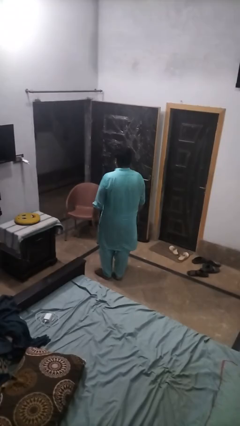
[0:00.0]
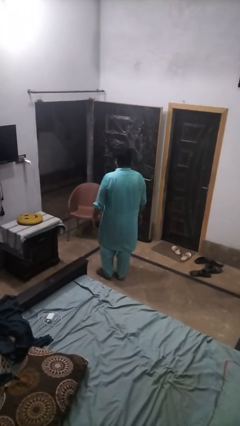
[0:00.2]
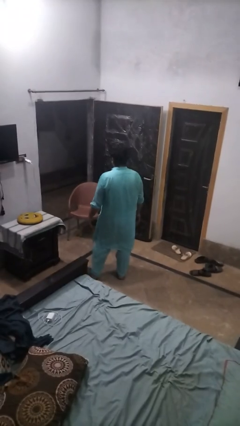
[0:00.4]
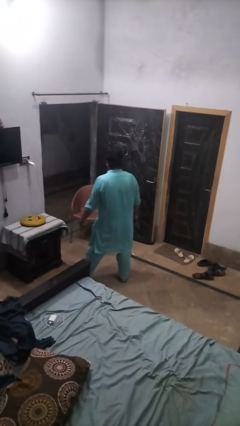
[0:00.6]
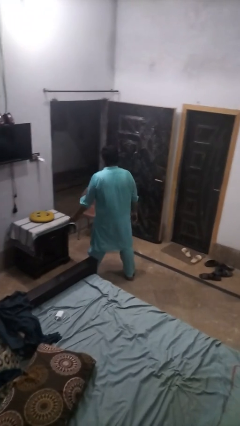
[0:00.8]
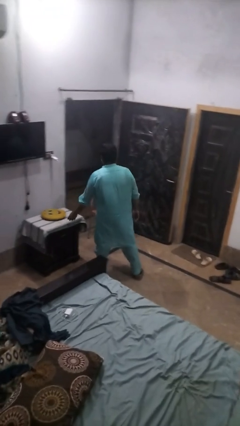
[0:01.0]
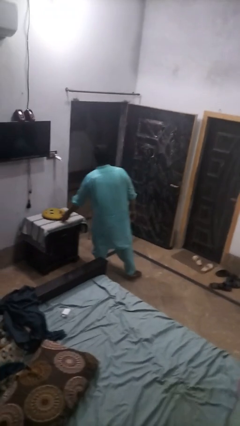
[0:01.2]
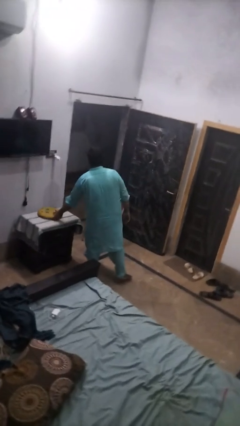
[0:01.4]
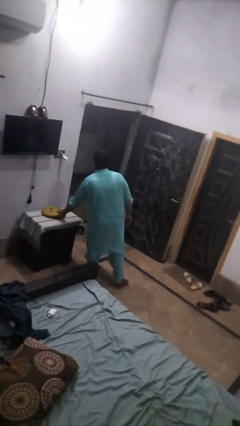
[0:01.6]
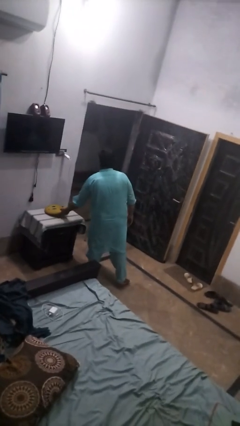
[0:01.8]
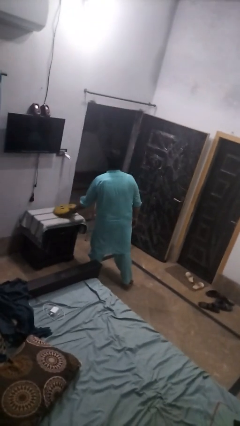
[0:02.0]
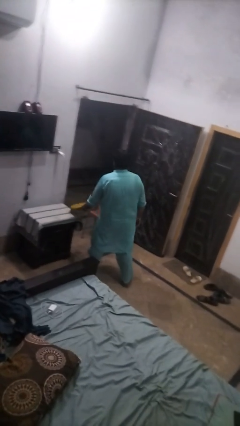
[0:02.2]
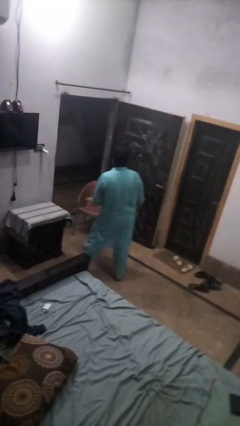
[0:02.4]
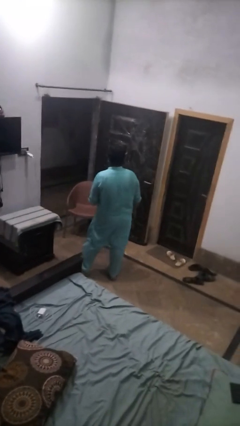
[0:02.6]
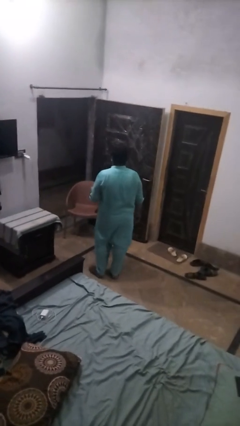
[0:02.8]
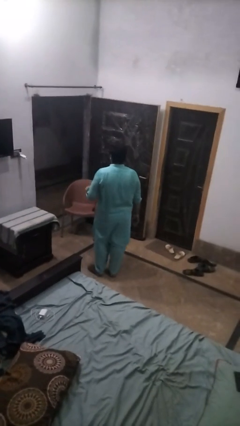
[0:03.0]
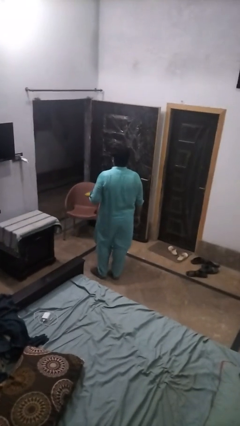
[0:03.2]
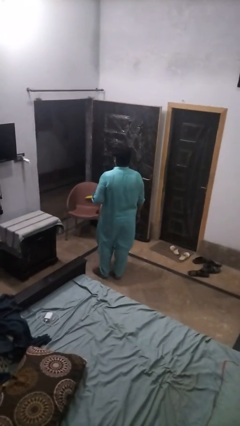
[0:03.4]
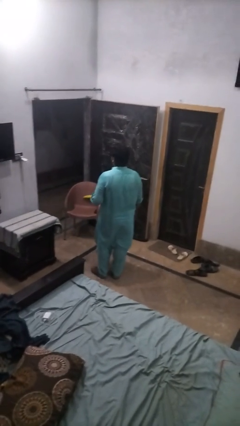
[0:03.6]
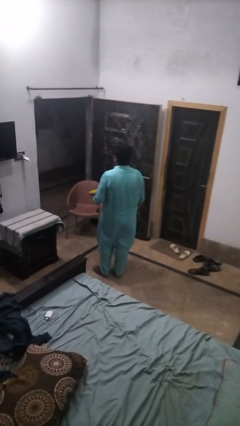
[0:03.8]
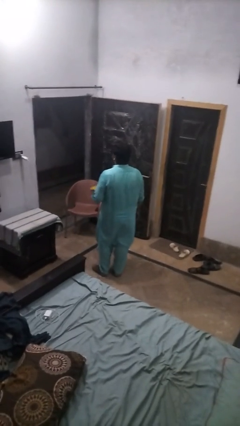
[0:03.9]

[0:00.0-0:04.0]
person picks up object from table

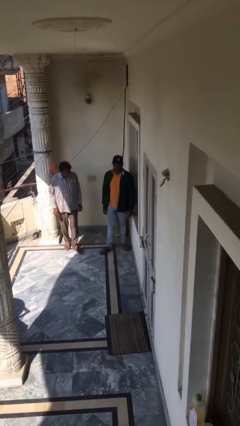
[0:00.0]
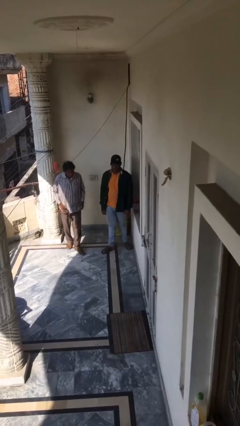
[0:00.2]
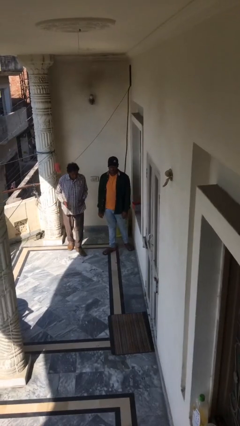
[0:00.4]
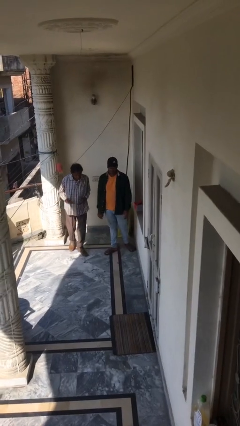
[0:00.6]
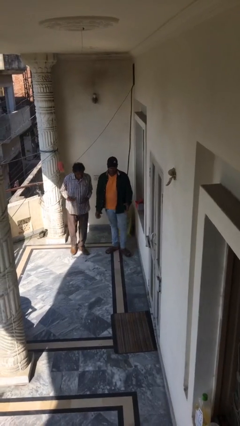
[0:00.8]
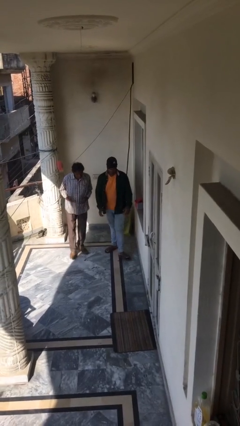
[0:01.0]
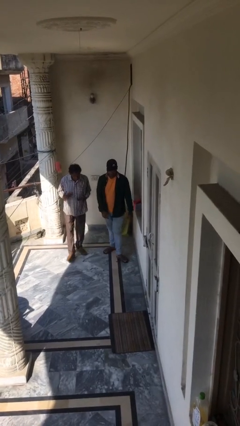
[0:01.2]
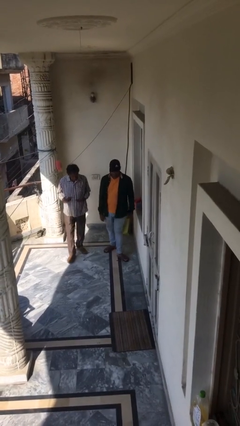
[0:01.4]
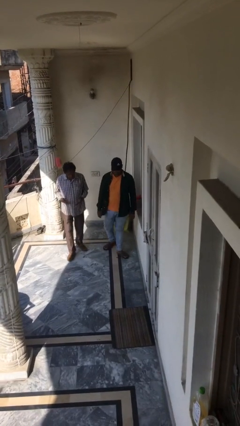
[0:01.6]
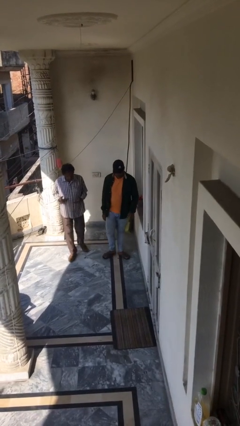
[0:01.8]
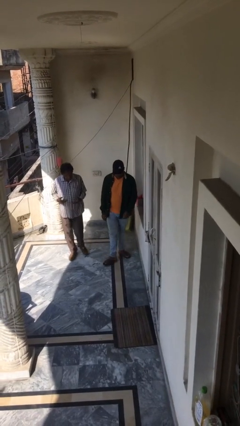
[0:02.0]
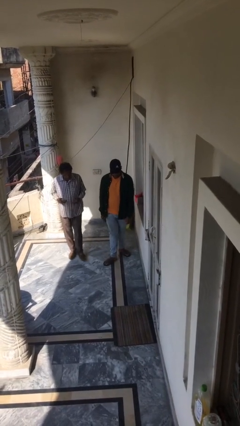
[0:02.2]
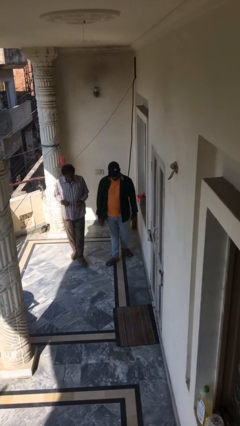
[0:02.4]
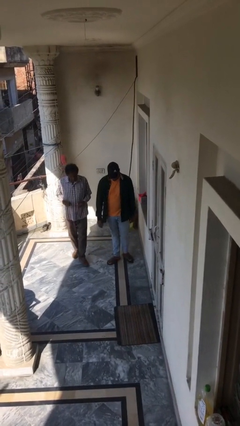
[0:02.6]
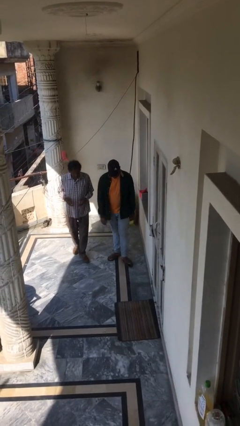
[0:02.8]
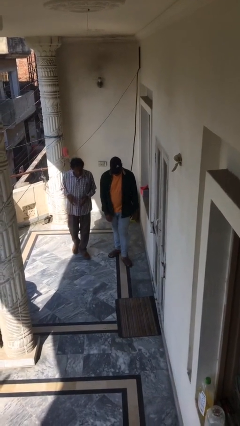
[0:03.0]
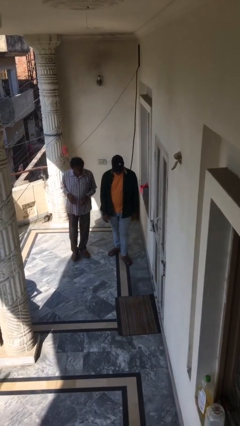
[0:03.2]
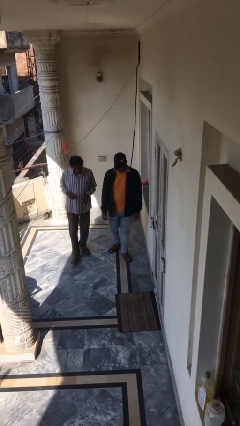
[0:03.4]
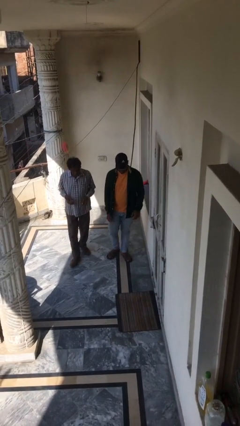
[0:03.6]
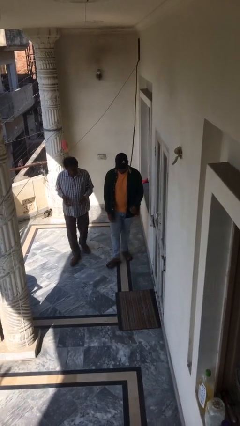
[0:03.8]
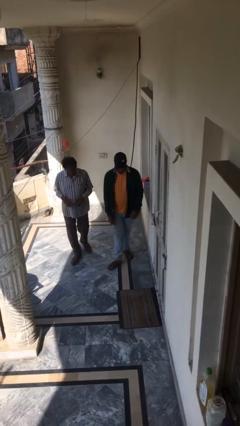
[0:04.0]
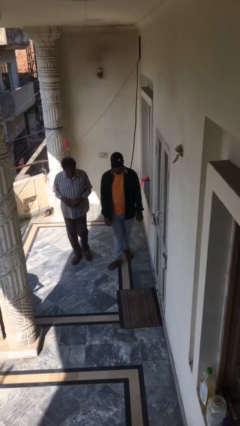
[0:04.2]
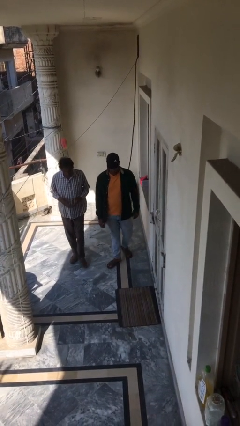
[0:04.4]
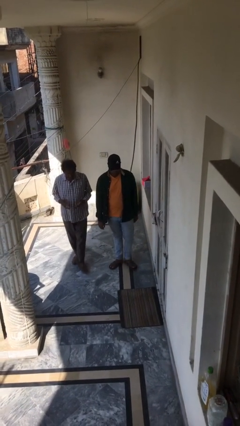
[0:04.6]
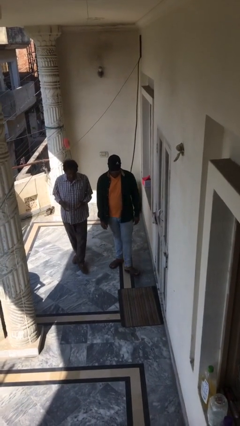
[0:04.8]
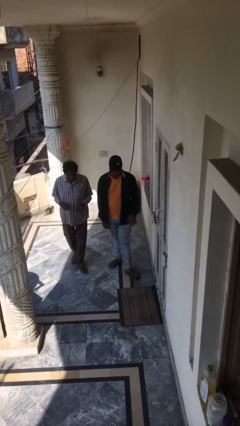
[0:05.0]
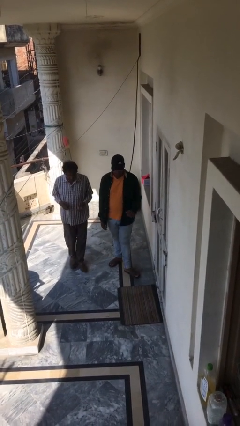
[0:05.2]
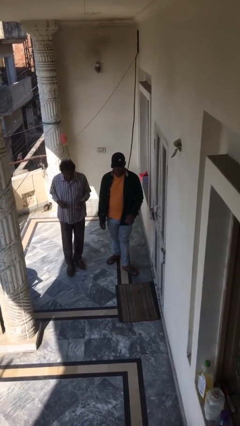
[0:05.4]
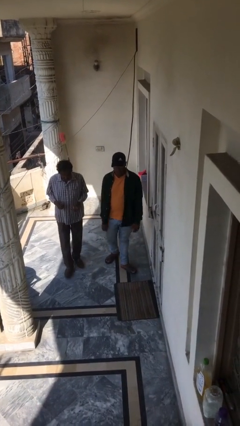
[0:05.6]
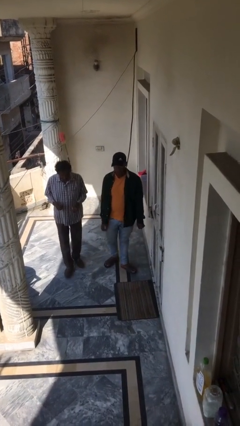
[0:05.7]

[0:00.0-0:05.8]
person talks to person

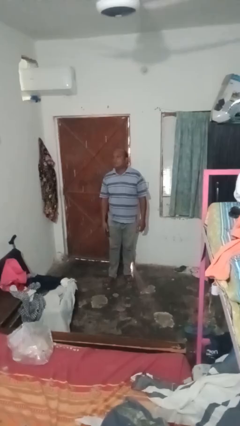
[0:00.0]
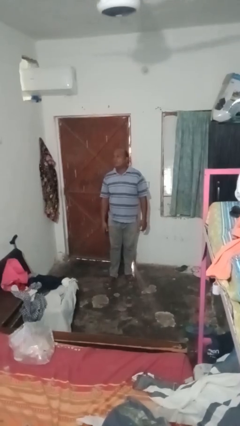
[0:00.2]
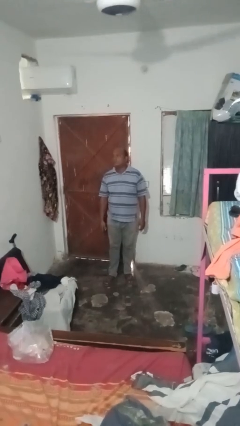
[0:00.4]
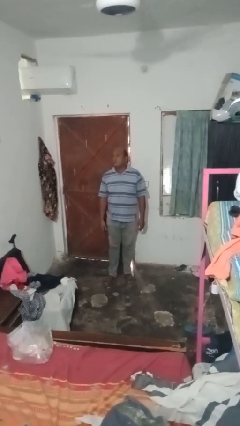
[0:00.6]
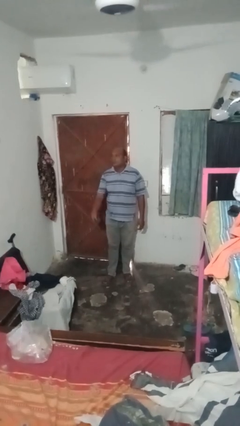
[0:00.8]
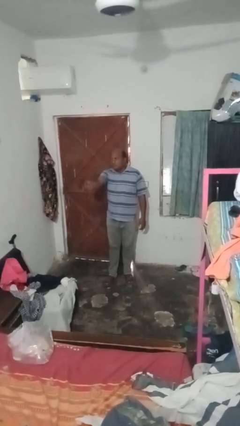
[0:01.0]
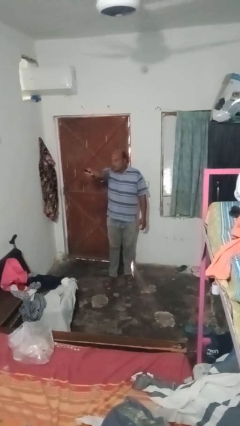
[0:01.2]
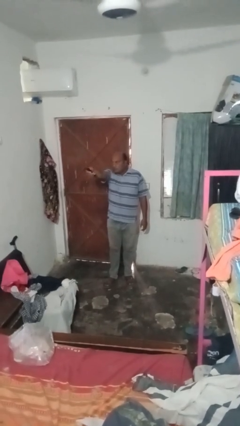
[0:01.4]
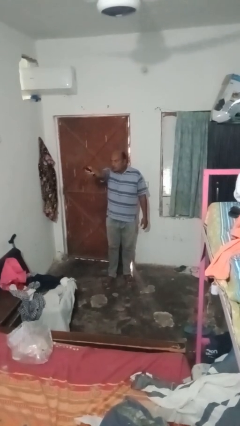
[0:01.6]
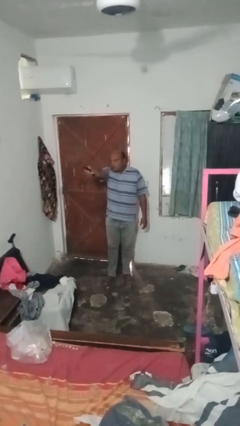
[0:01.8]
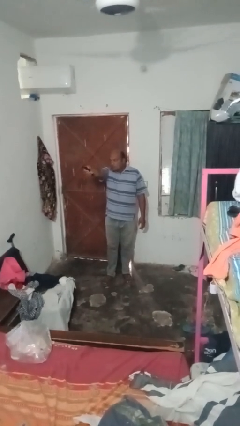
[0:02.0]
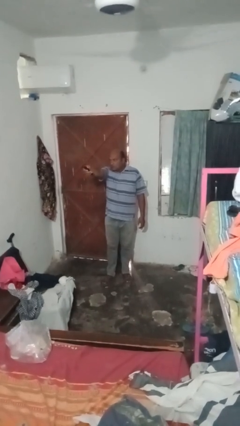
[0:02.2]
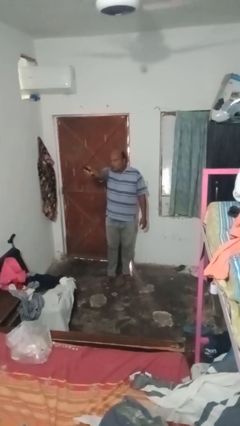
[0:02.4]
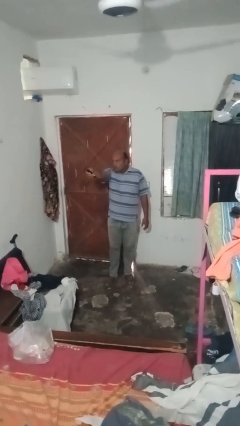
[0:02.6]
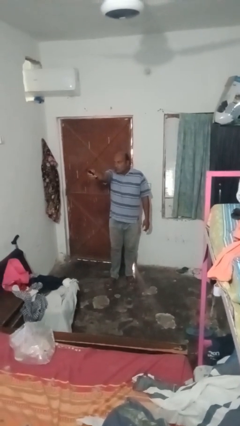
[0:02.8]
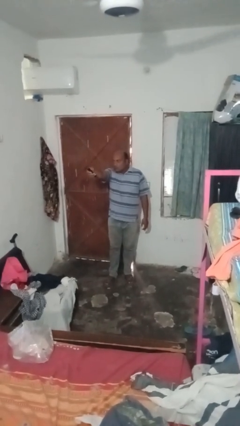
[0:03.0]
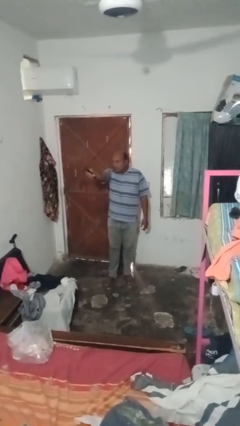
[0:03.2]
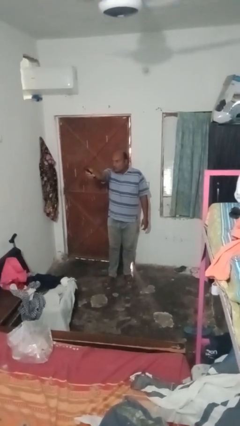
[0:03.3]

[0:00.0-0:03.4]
person uses television remote

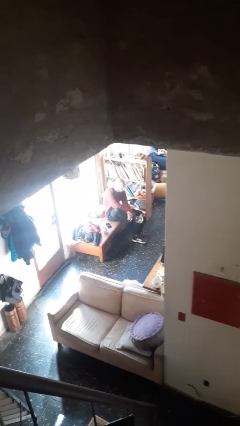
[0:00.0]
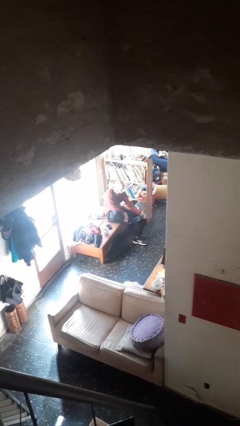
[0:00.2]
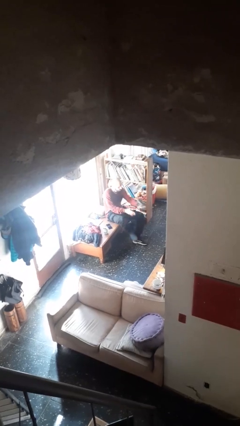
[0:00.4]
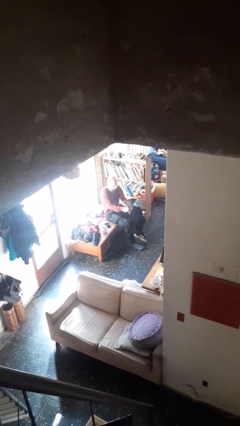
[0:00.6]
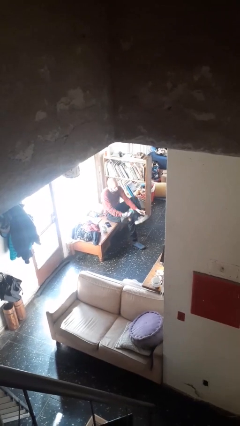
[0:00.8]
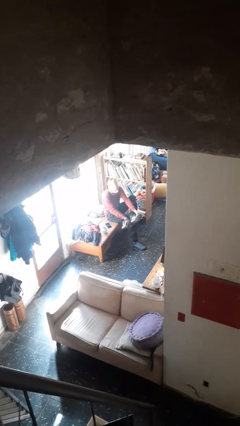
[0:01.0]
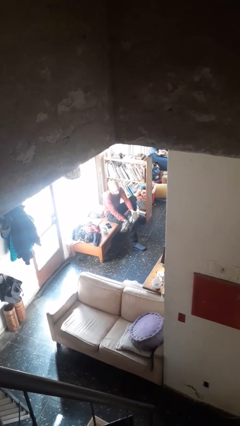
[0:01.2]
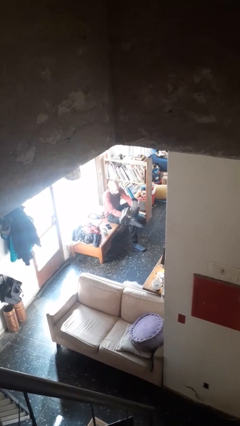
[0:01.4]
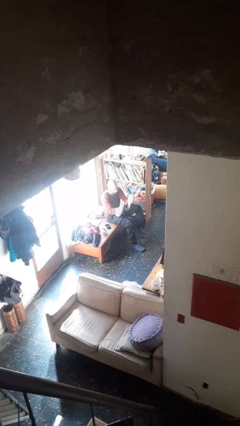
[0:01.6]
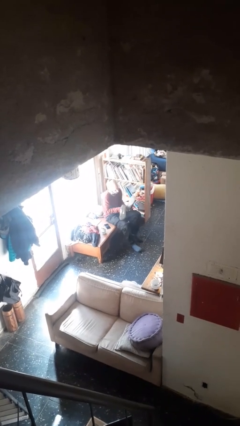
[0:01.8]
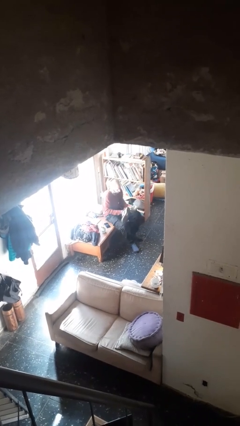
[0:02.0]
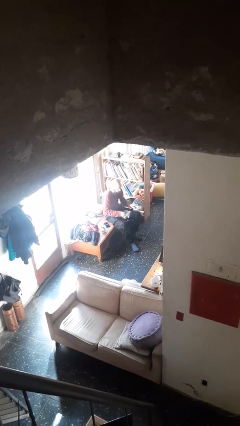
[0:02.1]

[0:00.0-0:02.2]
person takes off shoes

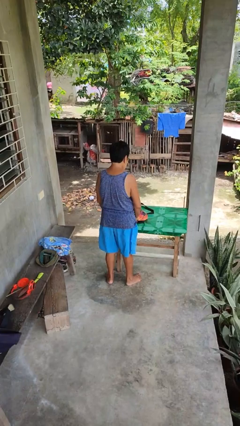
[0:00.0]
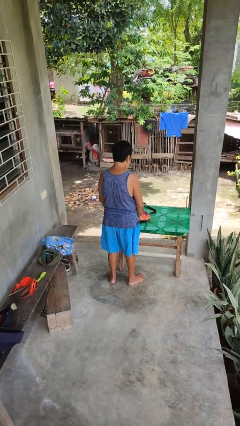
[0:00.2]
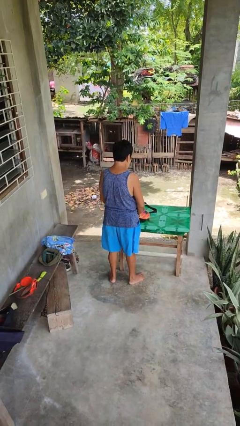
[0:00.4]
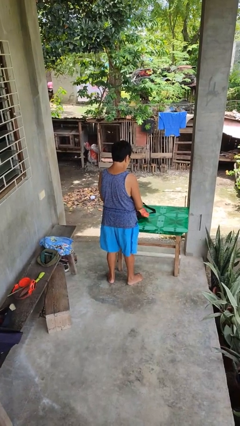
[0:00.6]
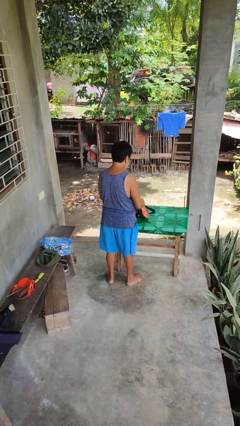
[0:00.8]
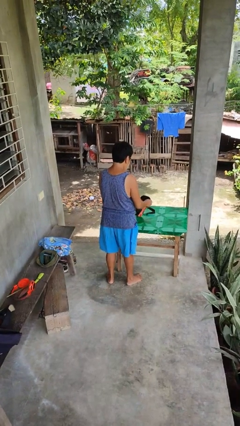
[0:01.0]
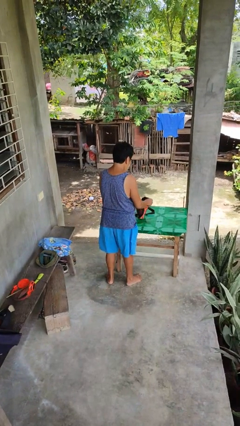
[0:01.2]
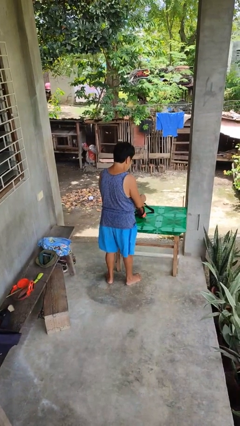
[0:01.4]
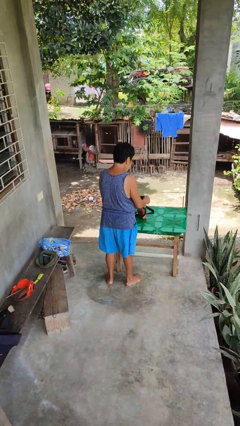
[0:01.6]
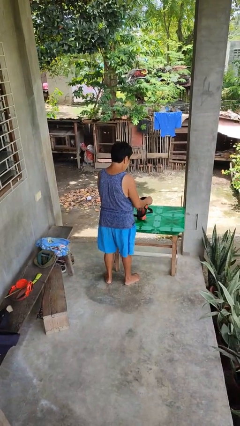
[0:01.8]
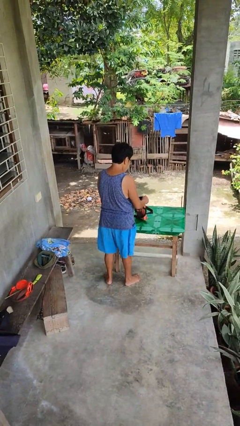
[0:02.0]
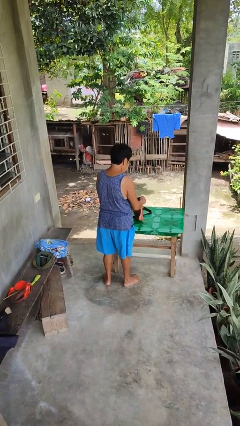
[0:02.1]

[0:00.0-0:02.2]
person searches in purse

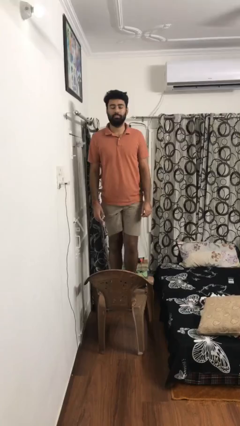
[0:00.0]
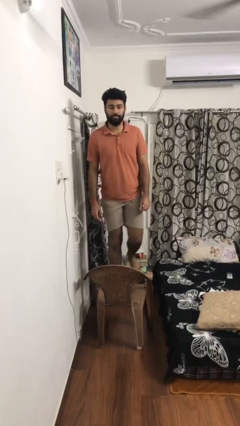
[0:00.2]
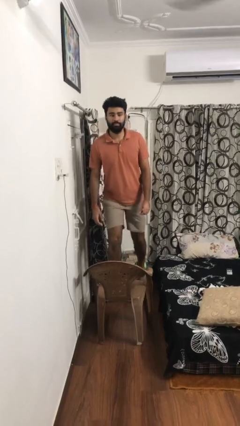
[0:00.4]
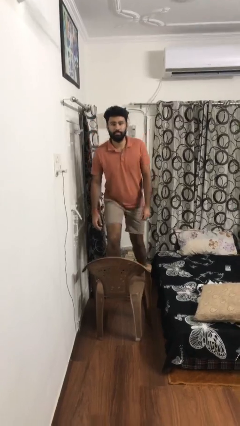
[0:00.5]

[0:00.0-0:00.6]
person climbs off chair
